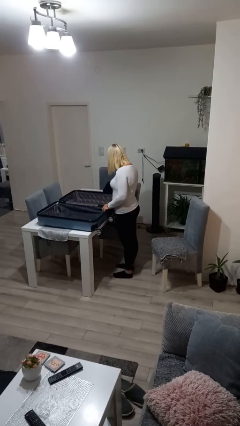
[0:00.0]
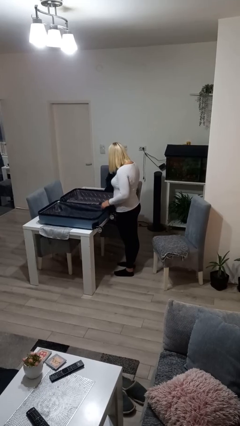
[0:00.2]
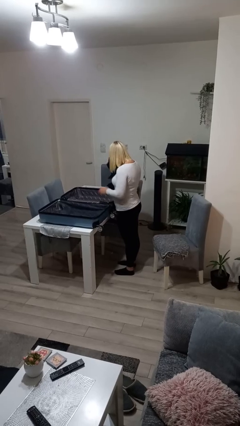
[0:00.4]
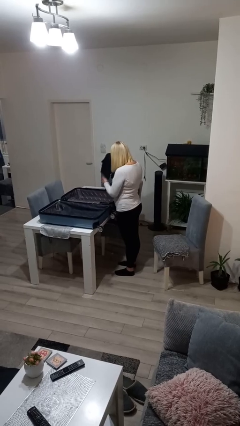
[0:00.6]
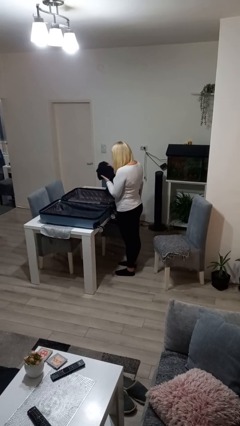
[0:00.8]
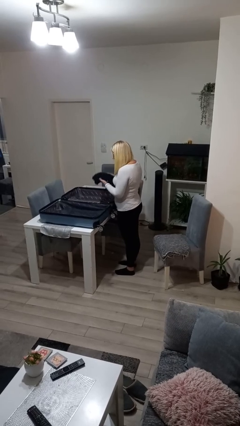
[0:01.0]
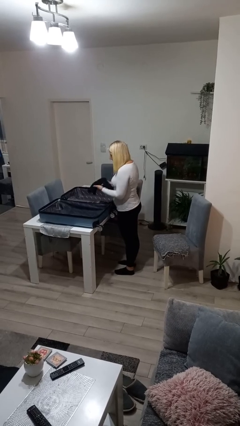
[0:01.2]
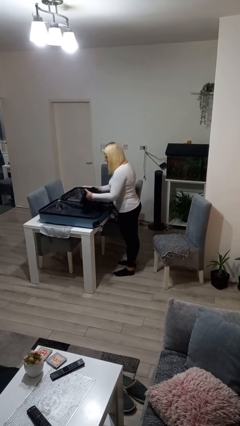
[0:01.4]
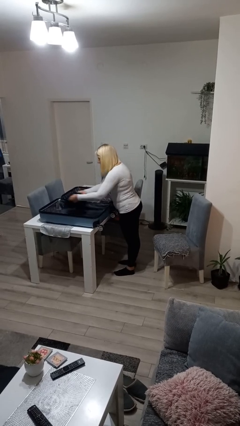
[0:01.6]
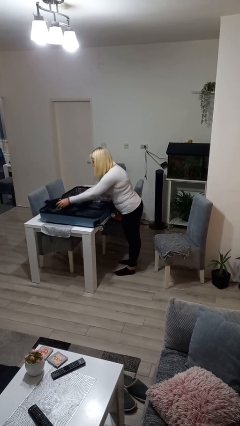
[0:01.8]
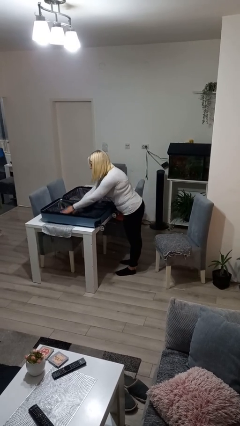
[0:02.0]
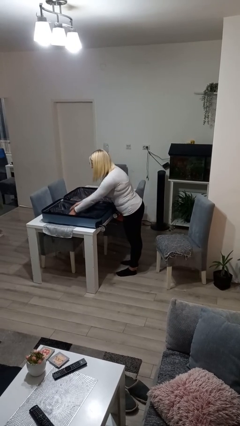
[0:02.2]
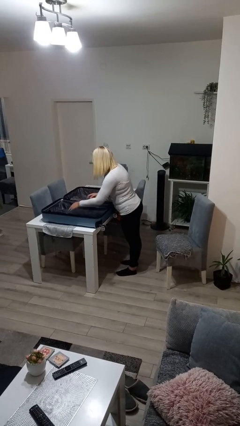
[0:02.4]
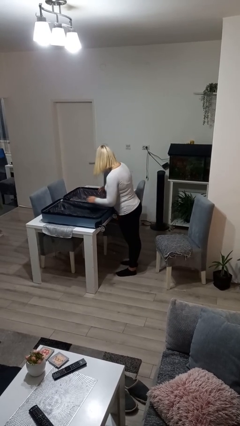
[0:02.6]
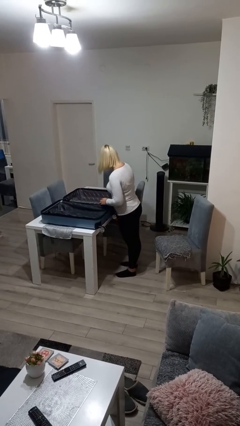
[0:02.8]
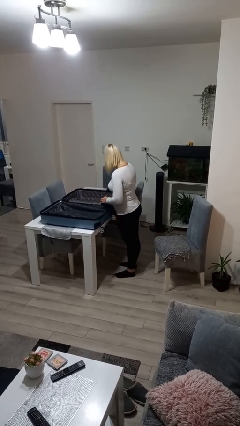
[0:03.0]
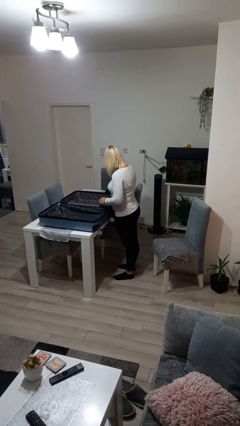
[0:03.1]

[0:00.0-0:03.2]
person loads clothes into suitcase

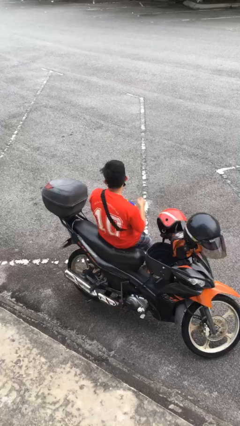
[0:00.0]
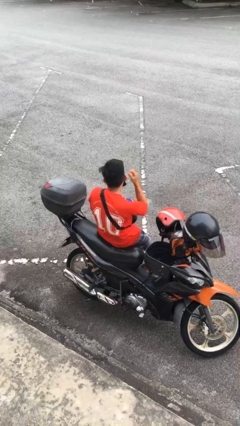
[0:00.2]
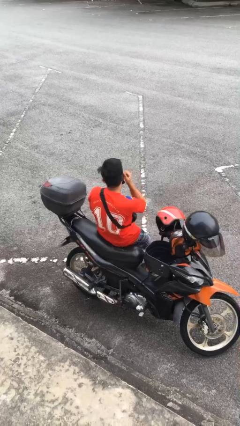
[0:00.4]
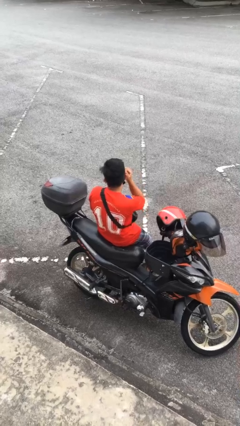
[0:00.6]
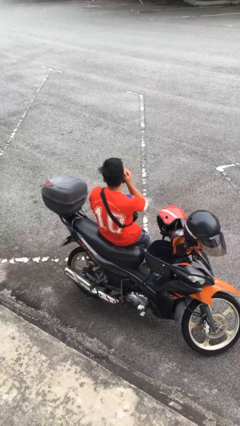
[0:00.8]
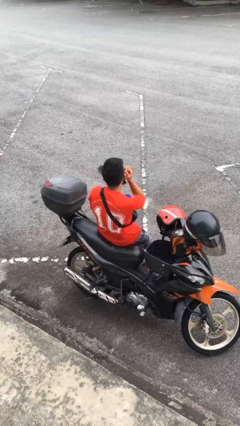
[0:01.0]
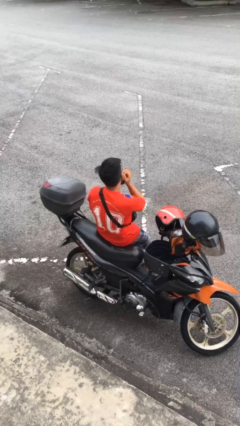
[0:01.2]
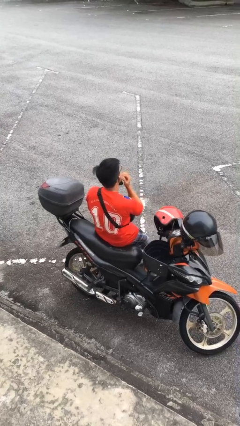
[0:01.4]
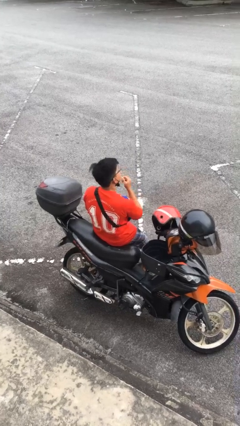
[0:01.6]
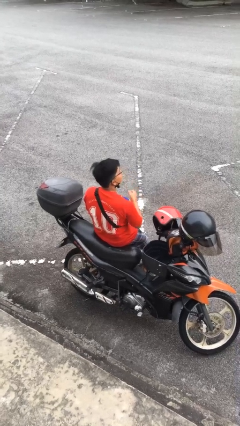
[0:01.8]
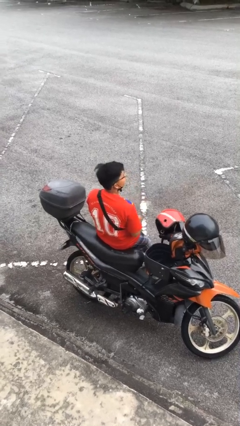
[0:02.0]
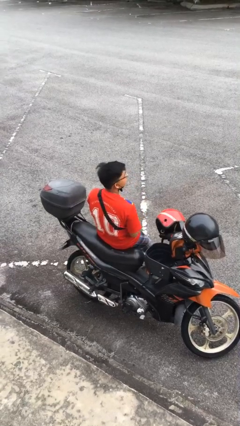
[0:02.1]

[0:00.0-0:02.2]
person scratches face

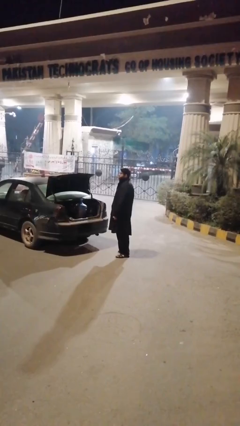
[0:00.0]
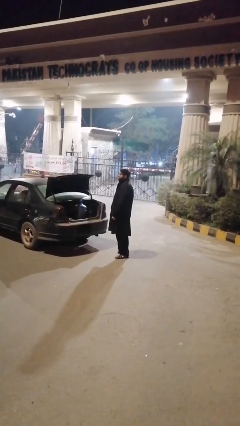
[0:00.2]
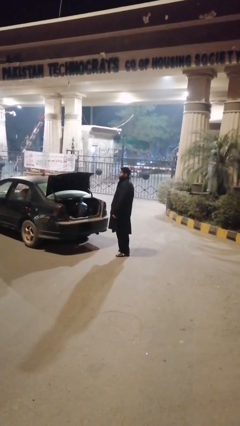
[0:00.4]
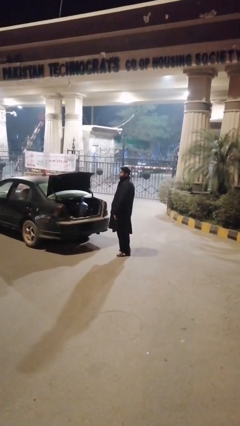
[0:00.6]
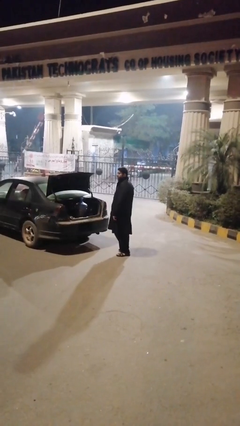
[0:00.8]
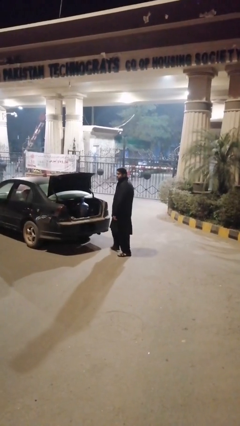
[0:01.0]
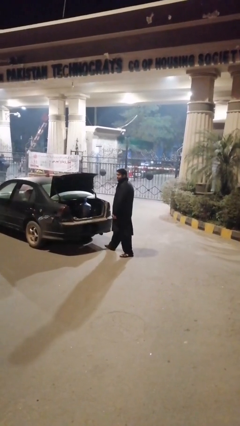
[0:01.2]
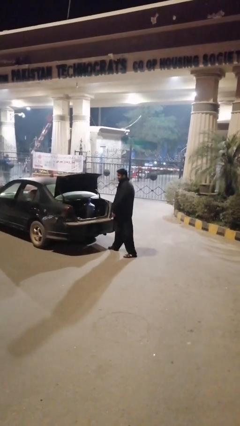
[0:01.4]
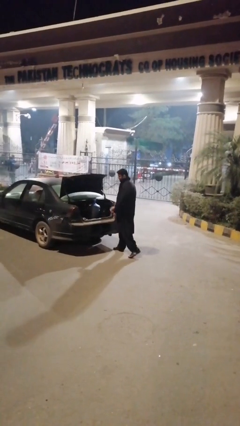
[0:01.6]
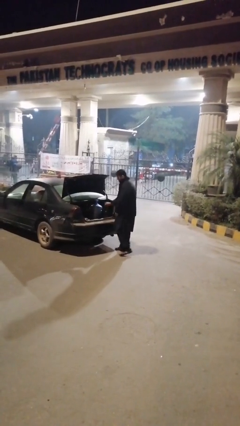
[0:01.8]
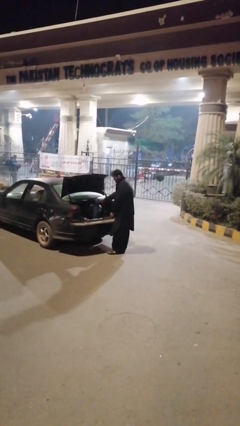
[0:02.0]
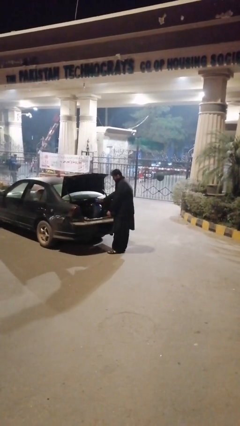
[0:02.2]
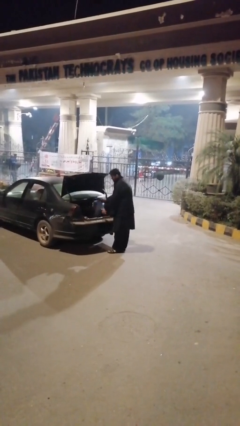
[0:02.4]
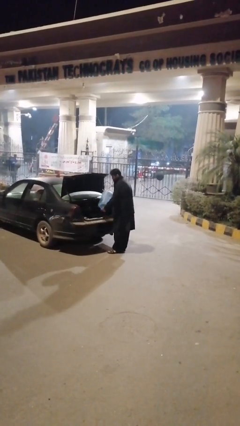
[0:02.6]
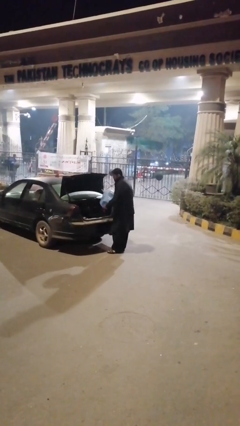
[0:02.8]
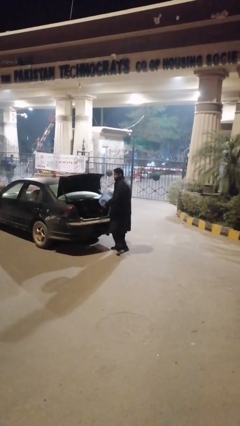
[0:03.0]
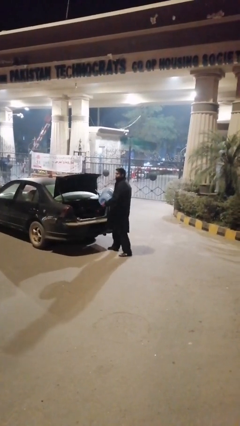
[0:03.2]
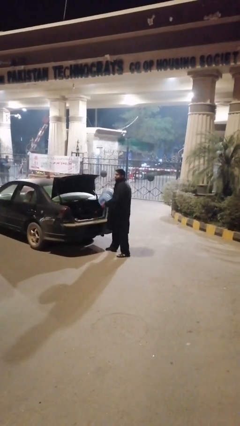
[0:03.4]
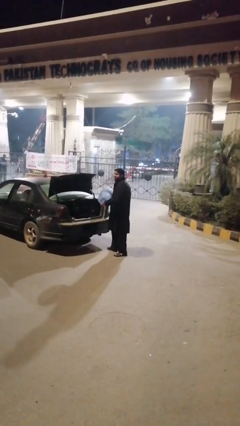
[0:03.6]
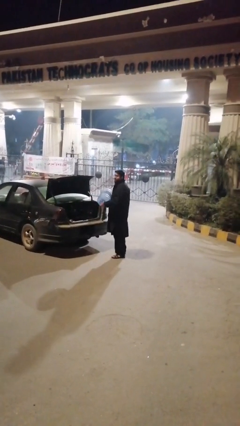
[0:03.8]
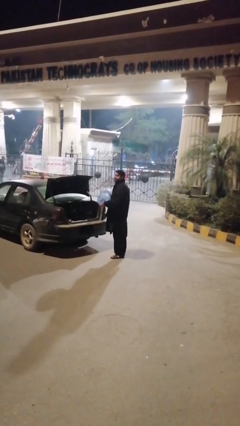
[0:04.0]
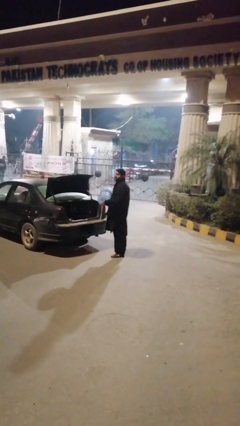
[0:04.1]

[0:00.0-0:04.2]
person unloads car

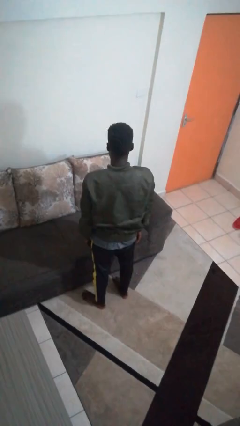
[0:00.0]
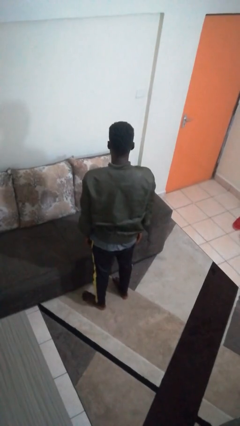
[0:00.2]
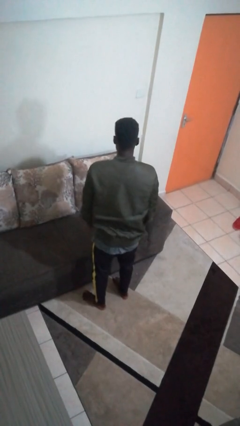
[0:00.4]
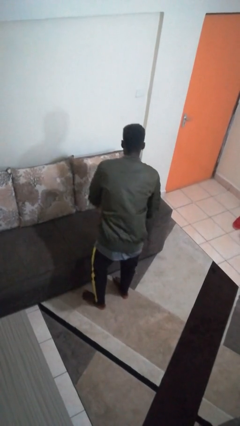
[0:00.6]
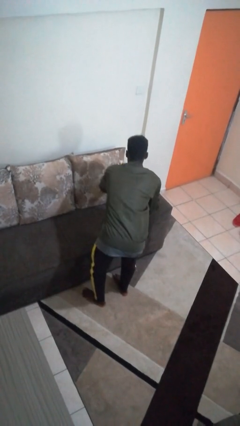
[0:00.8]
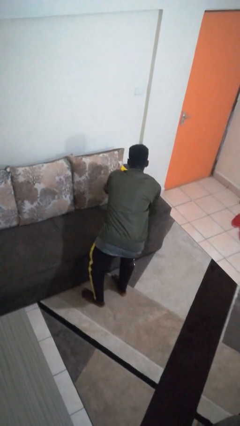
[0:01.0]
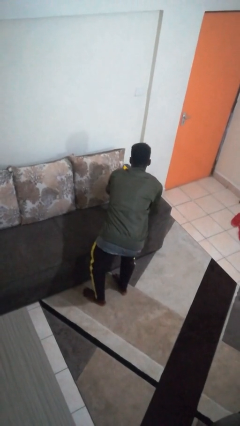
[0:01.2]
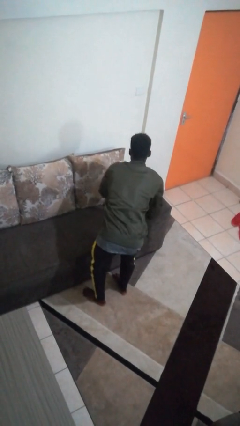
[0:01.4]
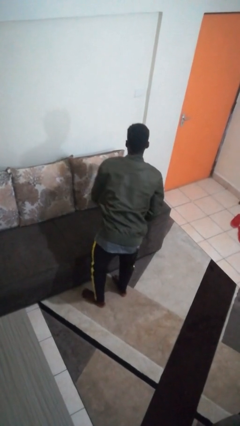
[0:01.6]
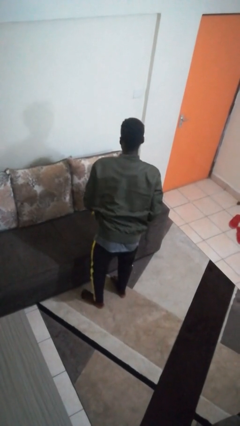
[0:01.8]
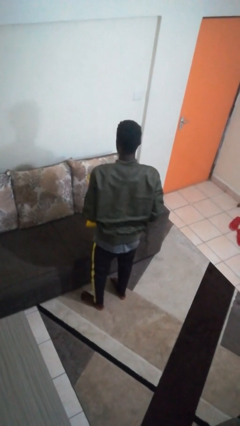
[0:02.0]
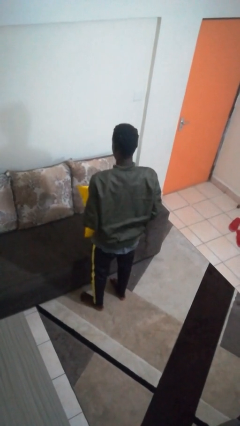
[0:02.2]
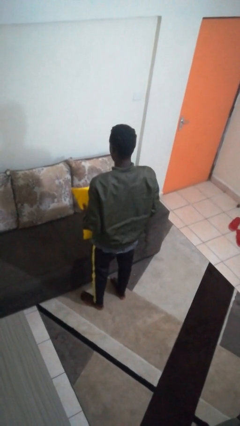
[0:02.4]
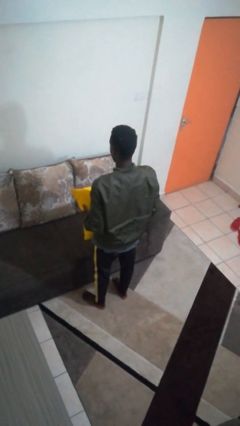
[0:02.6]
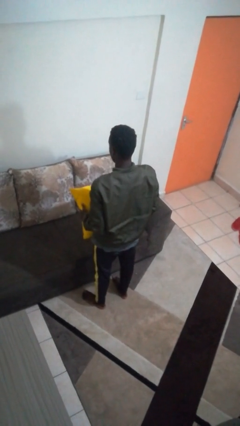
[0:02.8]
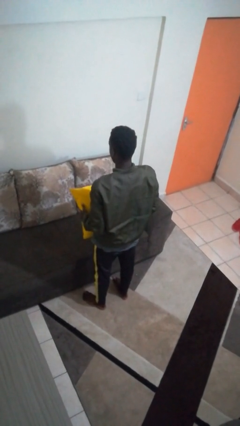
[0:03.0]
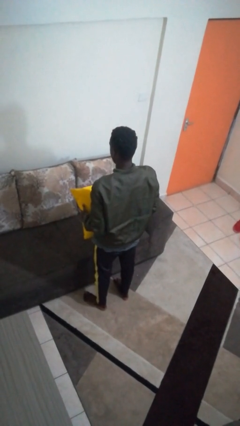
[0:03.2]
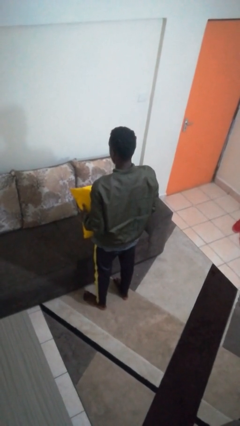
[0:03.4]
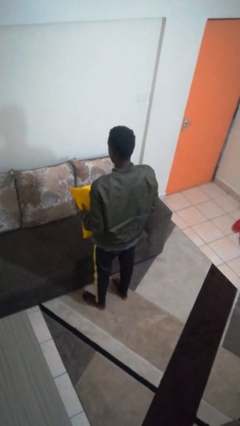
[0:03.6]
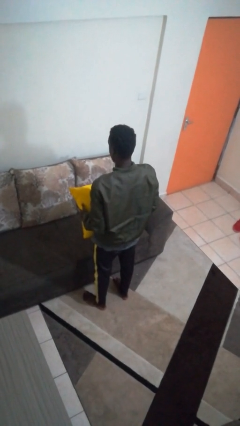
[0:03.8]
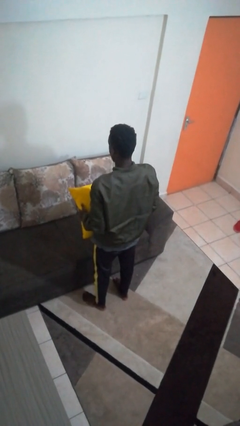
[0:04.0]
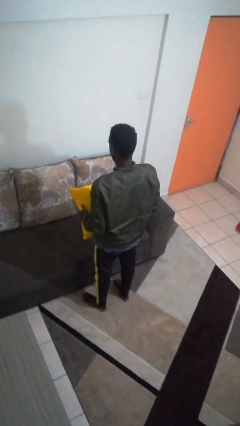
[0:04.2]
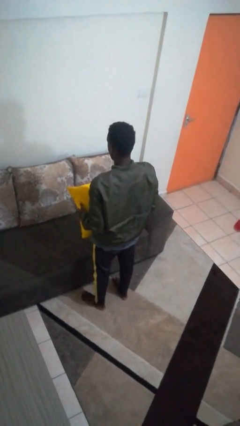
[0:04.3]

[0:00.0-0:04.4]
person picks up object from couch

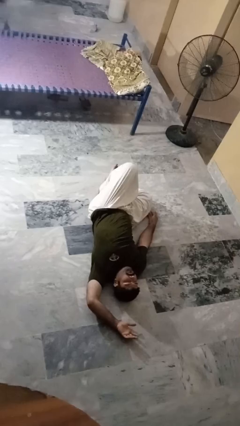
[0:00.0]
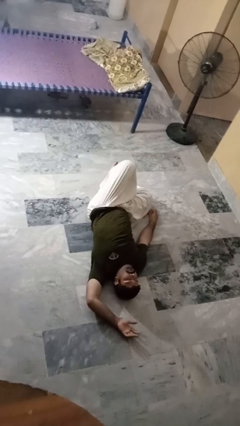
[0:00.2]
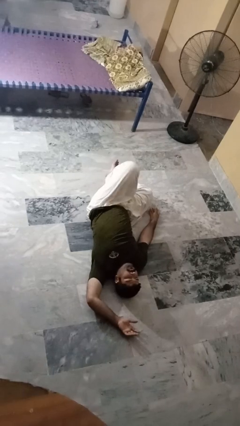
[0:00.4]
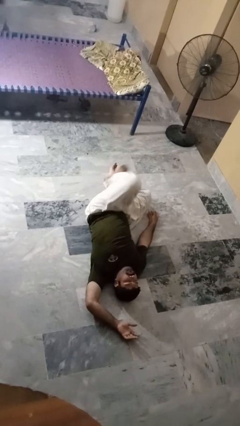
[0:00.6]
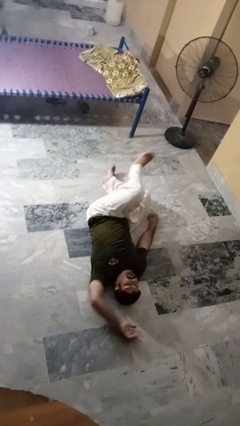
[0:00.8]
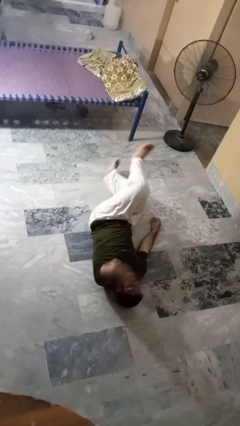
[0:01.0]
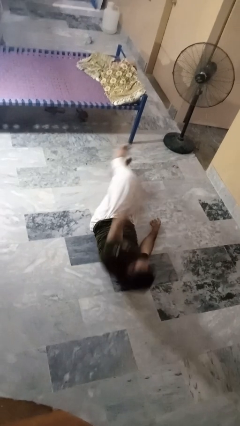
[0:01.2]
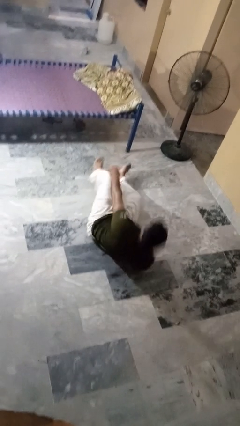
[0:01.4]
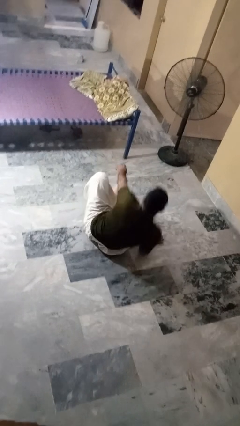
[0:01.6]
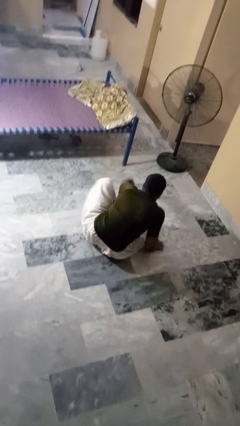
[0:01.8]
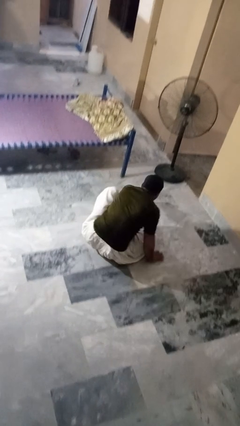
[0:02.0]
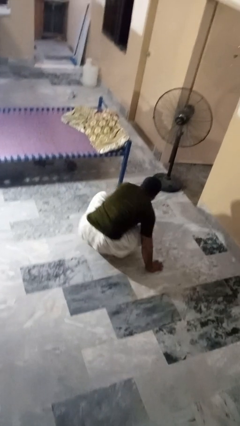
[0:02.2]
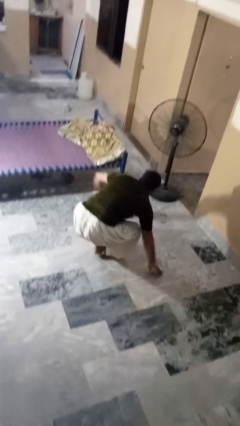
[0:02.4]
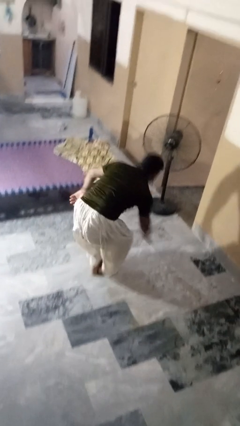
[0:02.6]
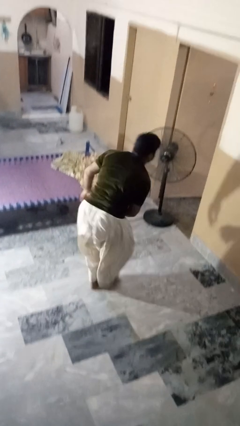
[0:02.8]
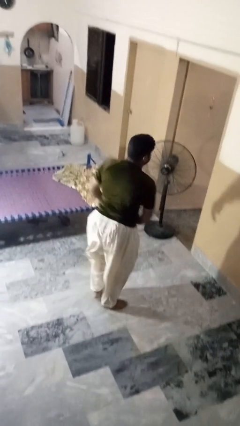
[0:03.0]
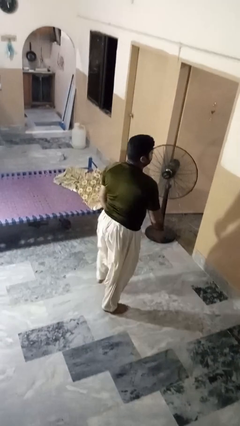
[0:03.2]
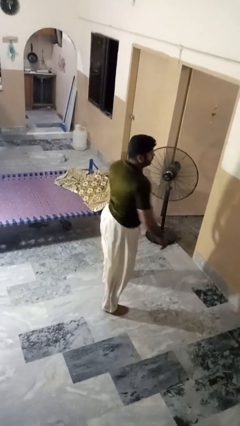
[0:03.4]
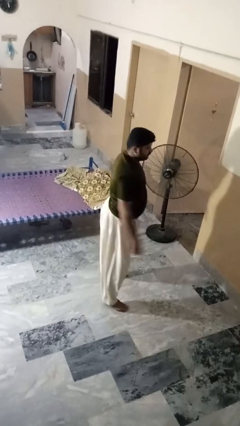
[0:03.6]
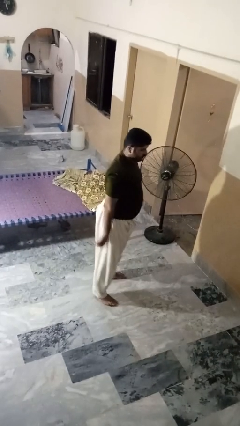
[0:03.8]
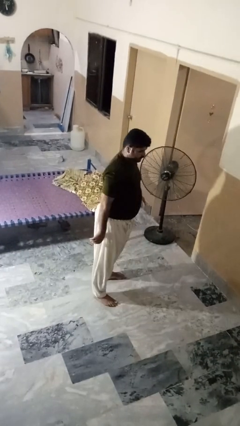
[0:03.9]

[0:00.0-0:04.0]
person stands up from floor
